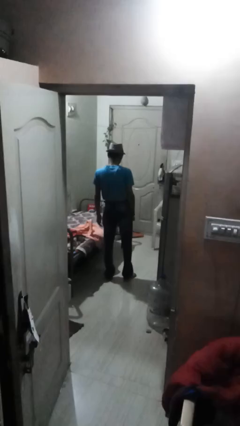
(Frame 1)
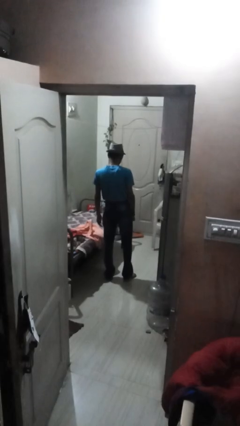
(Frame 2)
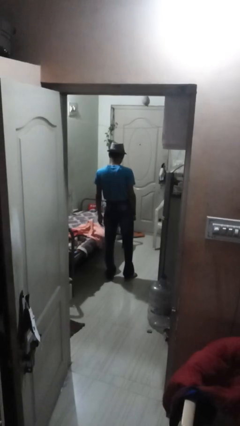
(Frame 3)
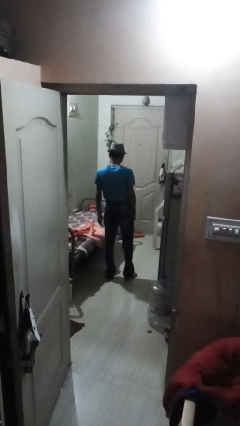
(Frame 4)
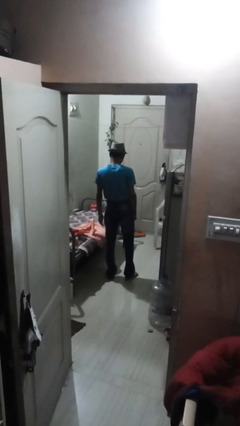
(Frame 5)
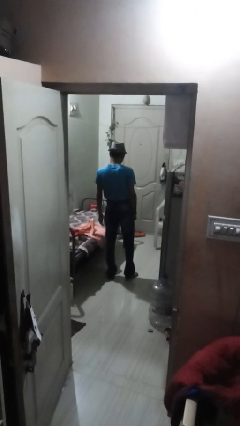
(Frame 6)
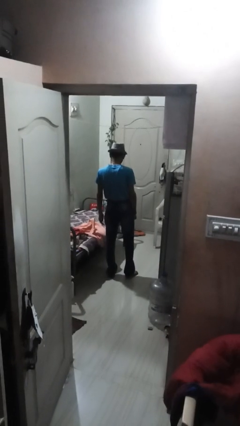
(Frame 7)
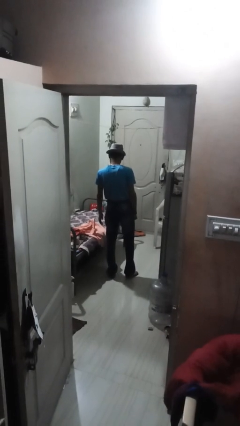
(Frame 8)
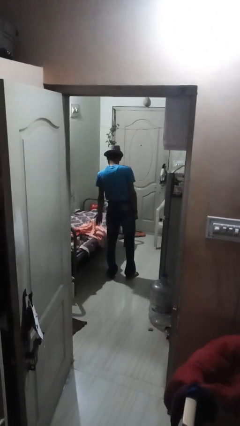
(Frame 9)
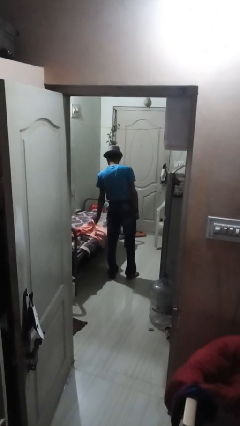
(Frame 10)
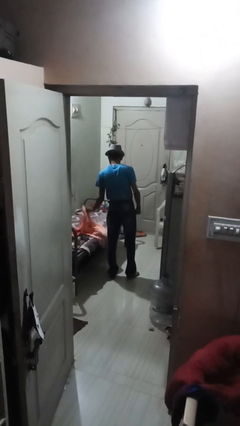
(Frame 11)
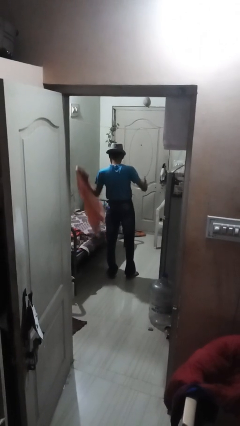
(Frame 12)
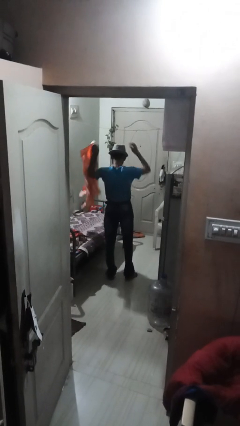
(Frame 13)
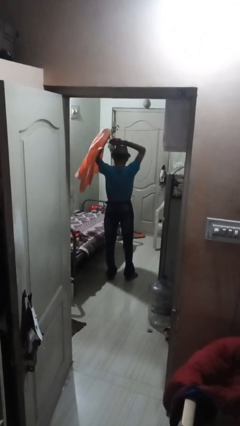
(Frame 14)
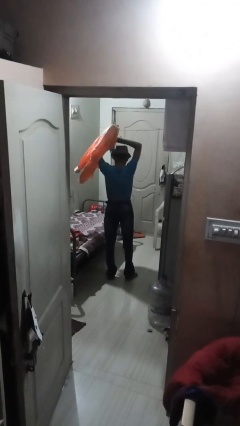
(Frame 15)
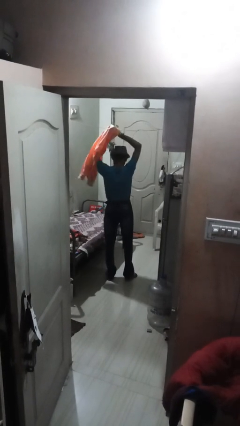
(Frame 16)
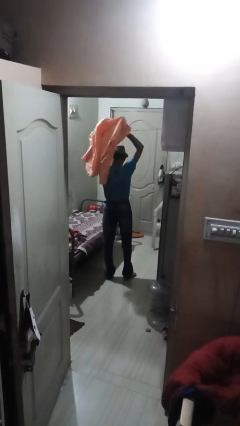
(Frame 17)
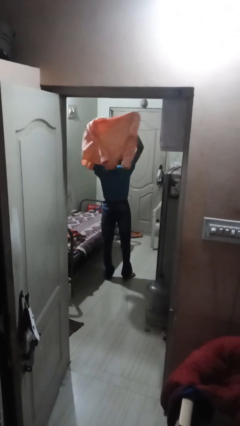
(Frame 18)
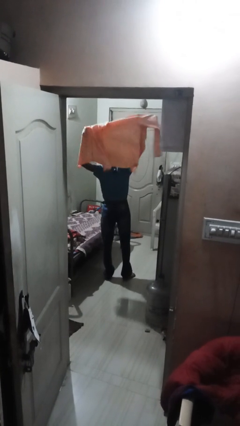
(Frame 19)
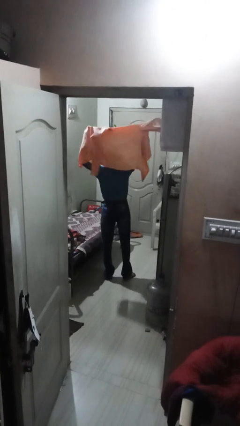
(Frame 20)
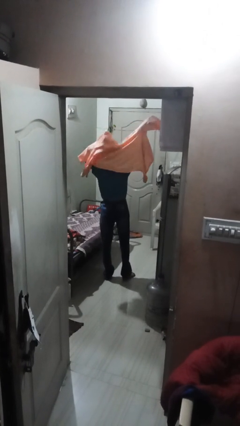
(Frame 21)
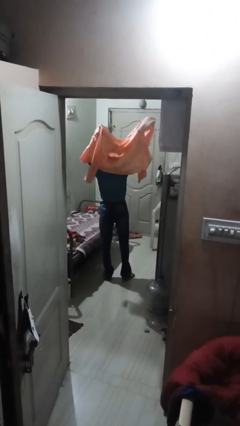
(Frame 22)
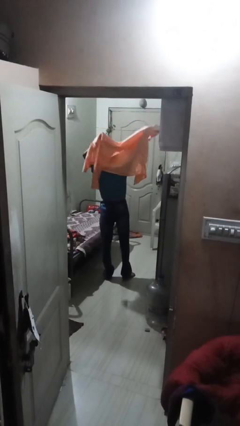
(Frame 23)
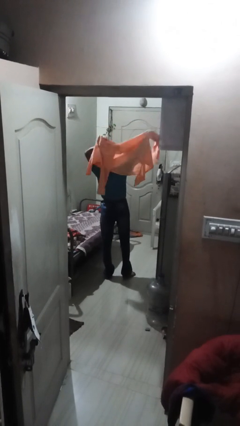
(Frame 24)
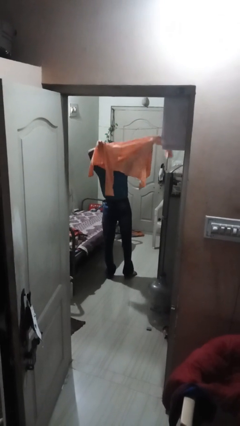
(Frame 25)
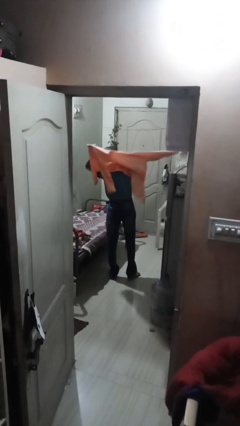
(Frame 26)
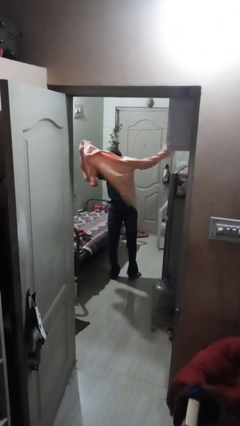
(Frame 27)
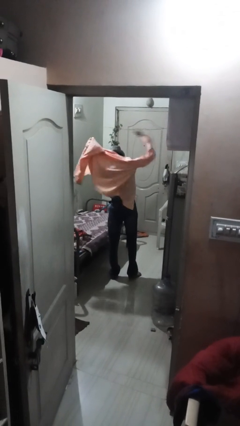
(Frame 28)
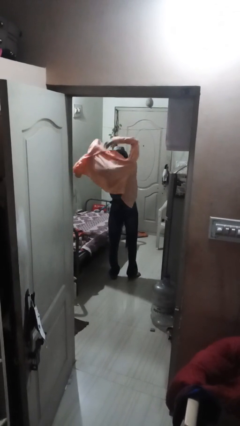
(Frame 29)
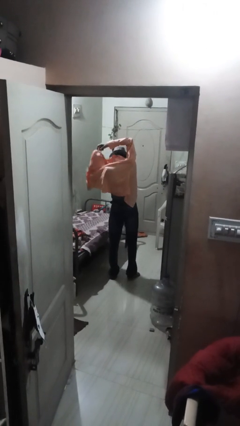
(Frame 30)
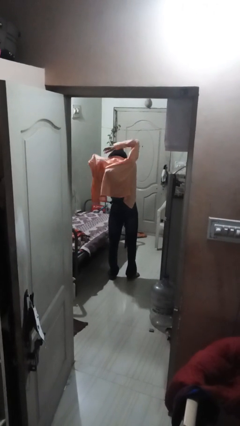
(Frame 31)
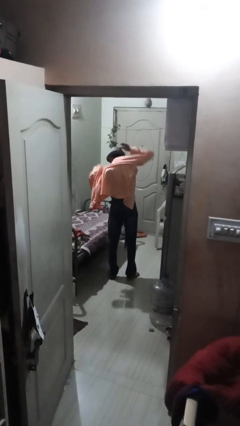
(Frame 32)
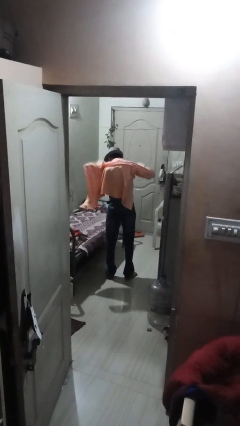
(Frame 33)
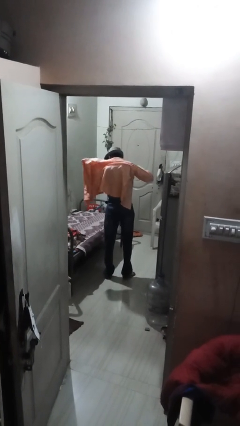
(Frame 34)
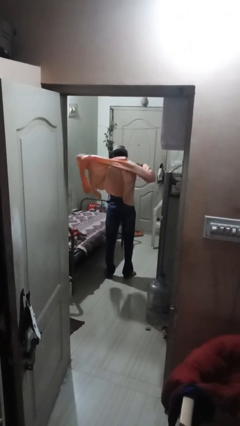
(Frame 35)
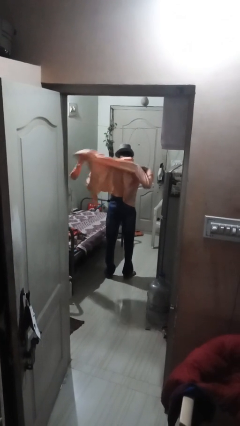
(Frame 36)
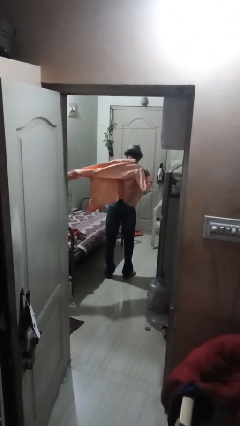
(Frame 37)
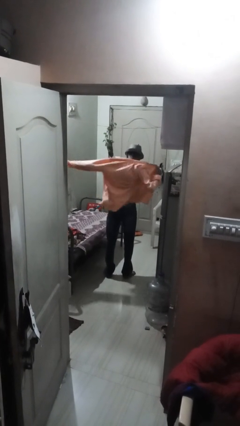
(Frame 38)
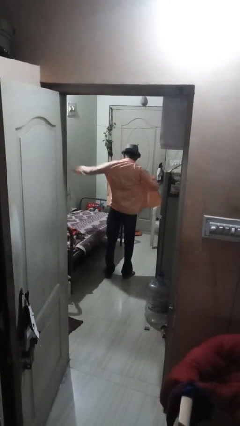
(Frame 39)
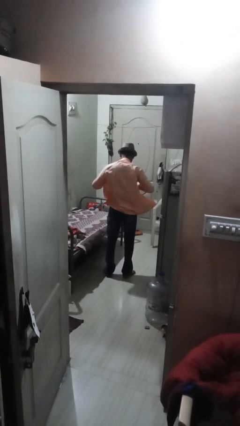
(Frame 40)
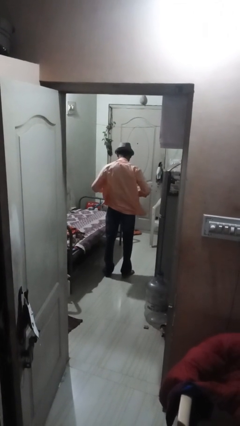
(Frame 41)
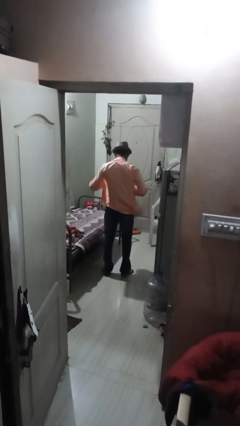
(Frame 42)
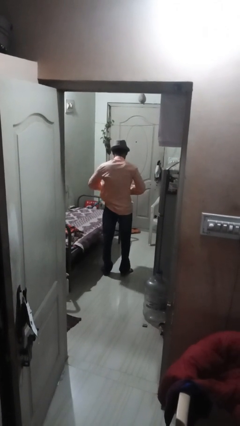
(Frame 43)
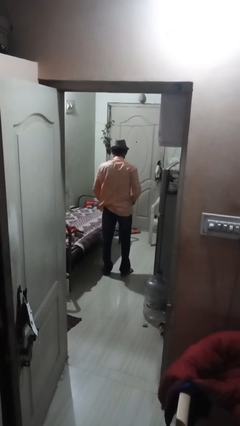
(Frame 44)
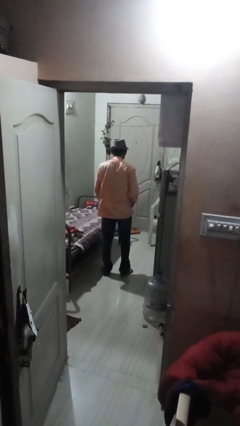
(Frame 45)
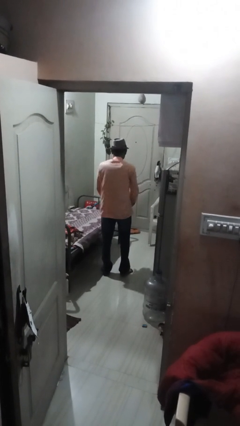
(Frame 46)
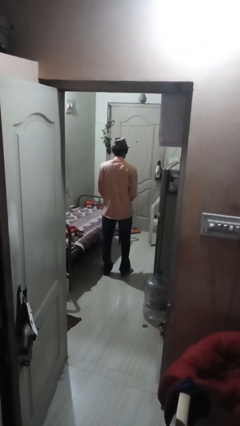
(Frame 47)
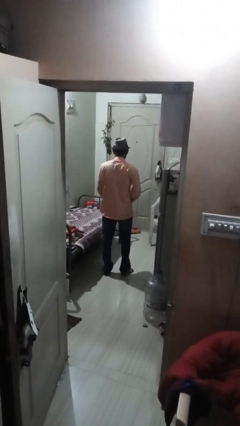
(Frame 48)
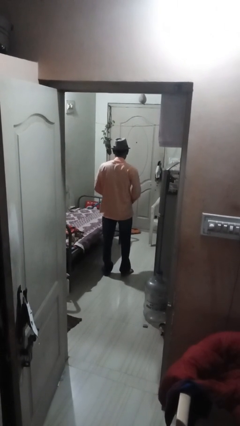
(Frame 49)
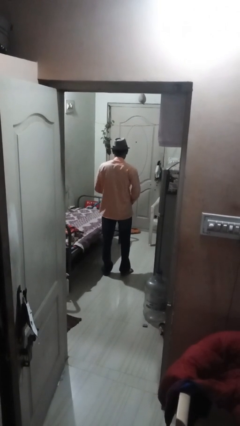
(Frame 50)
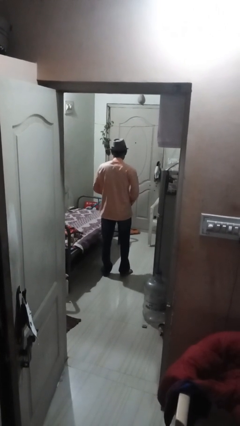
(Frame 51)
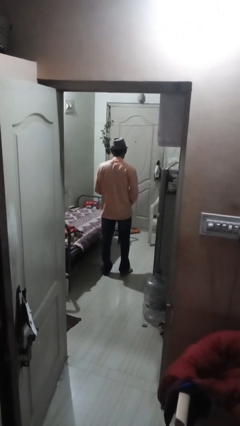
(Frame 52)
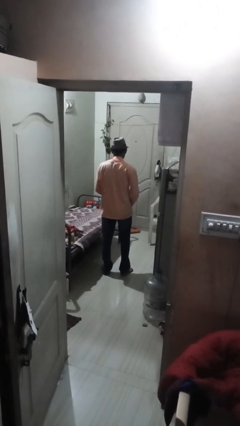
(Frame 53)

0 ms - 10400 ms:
person puts on shirt

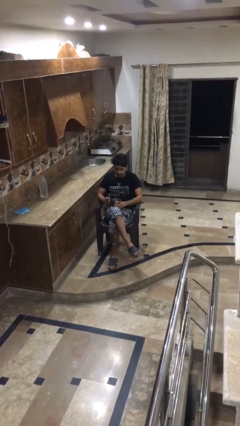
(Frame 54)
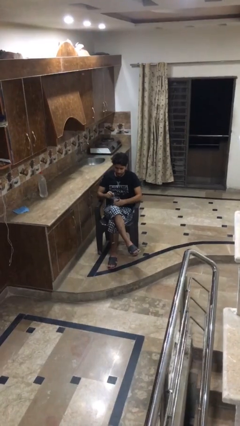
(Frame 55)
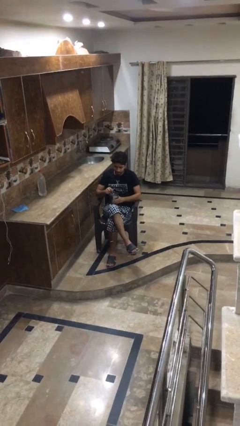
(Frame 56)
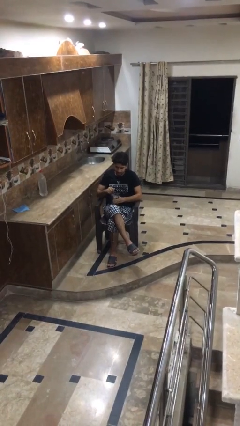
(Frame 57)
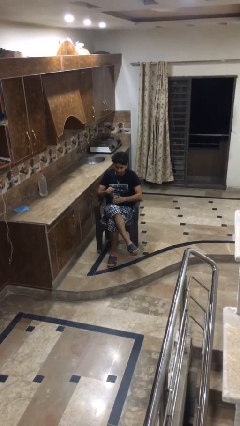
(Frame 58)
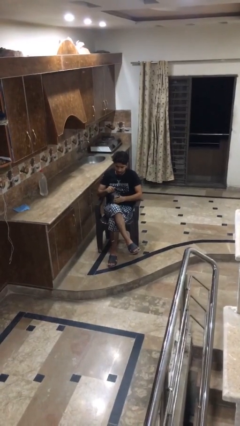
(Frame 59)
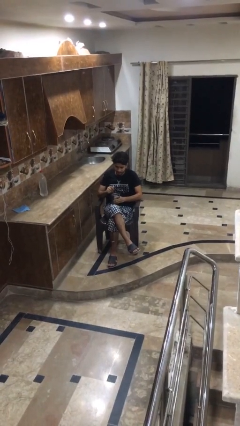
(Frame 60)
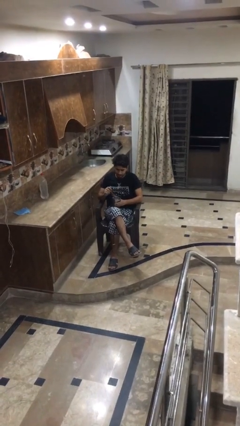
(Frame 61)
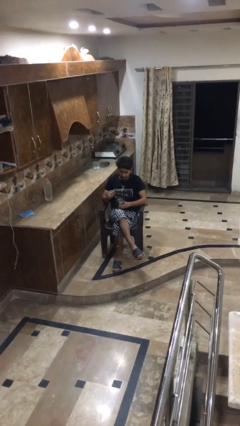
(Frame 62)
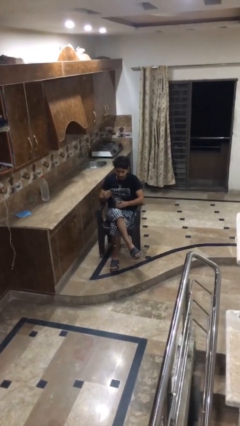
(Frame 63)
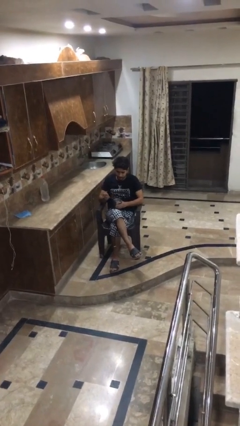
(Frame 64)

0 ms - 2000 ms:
person stirs mug

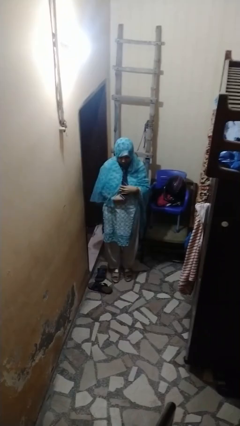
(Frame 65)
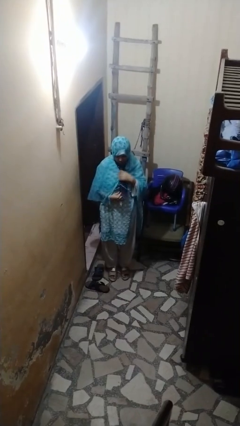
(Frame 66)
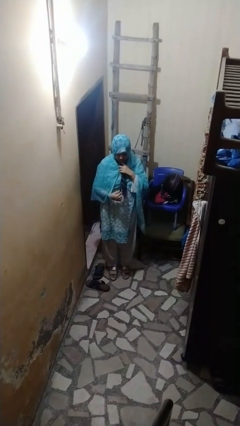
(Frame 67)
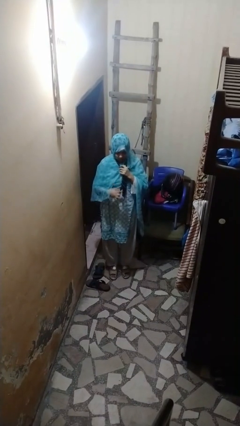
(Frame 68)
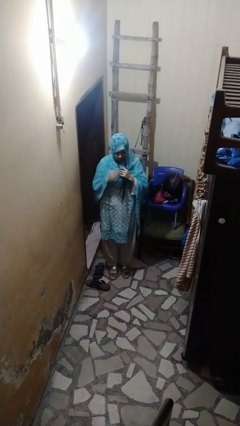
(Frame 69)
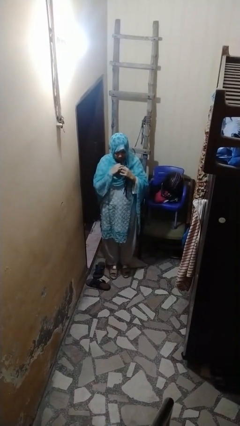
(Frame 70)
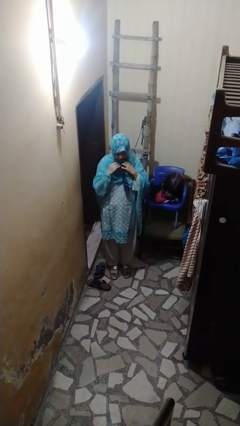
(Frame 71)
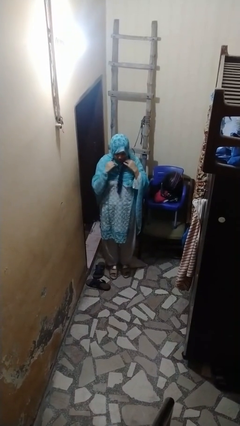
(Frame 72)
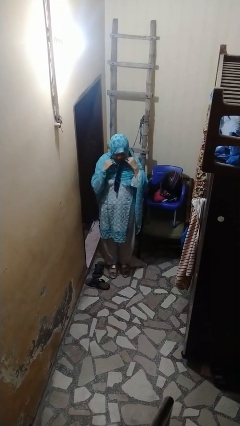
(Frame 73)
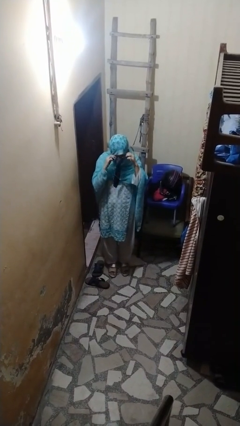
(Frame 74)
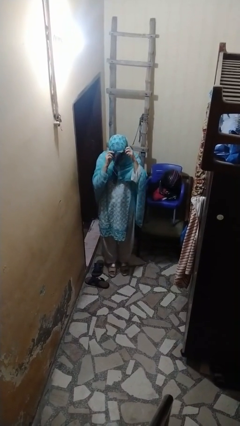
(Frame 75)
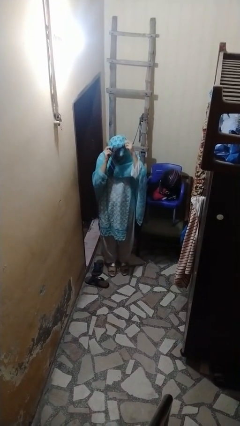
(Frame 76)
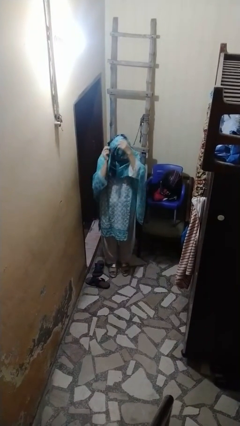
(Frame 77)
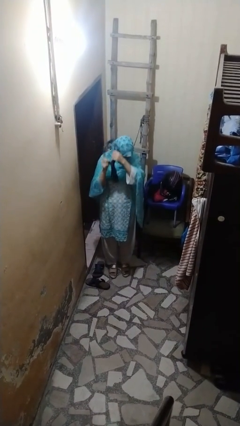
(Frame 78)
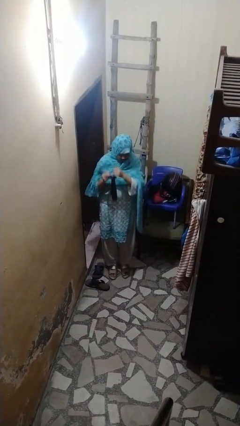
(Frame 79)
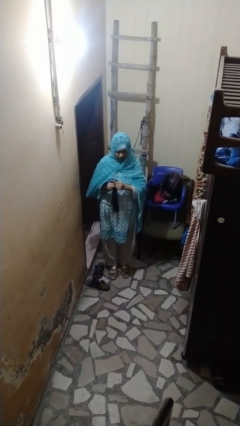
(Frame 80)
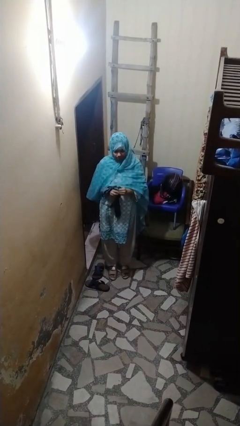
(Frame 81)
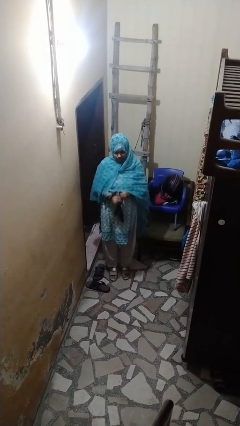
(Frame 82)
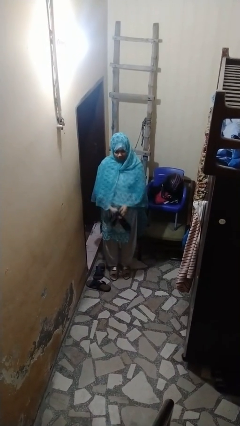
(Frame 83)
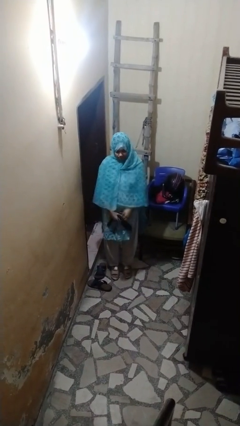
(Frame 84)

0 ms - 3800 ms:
person takes off necktie

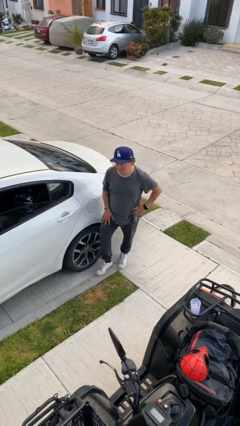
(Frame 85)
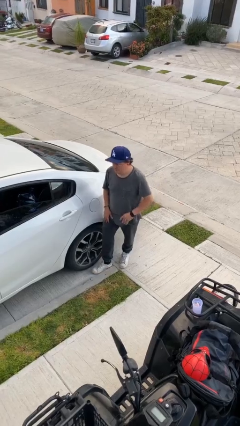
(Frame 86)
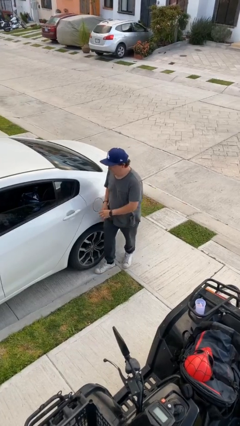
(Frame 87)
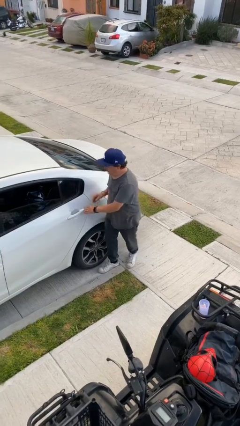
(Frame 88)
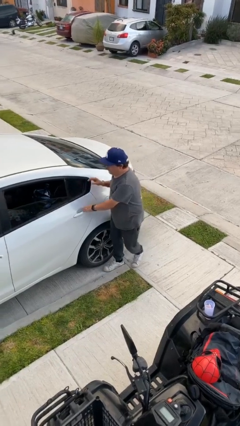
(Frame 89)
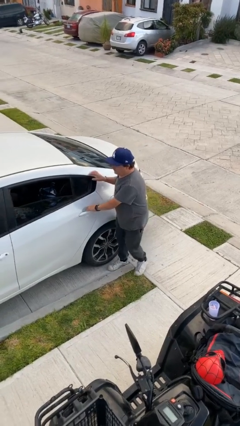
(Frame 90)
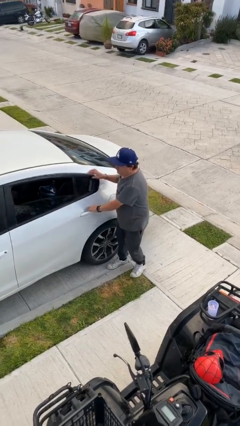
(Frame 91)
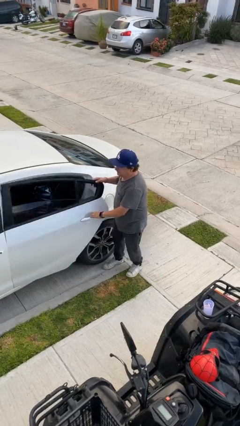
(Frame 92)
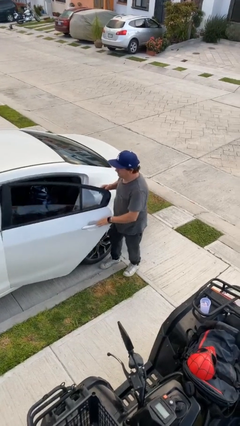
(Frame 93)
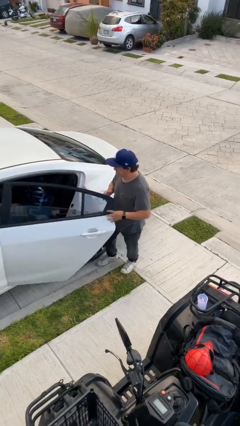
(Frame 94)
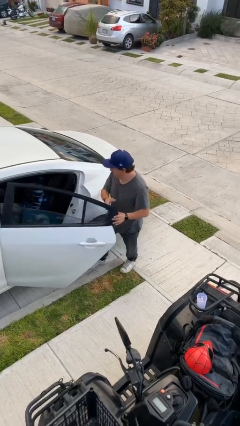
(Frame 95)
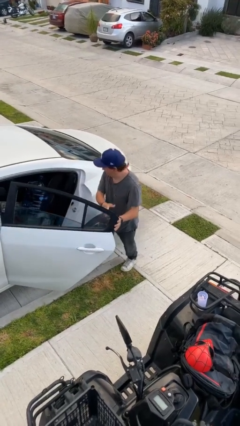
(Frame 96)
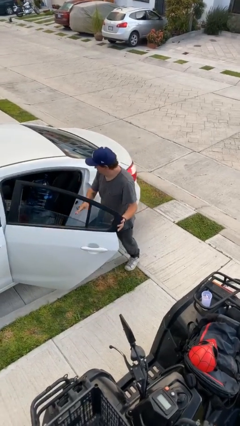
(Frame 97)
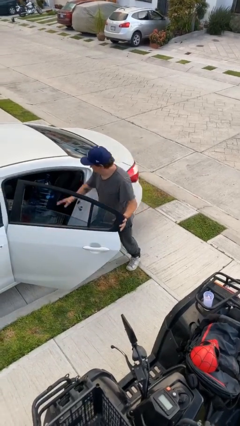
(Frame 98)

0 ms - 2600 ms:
person opens car door
